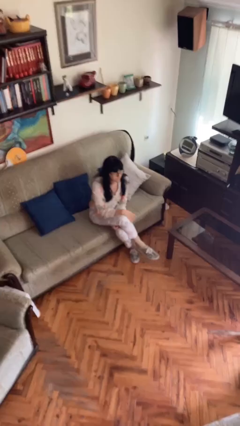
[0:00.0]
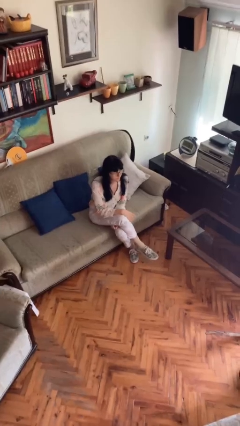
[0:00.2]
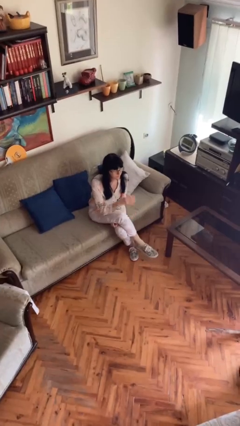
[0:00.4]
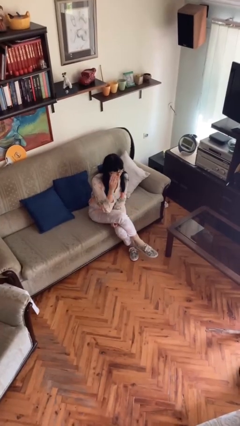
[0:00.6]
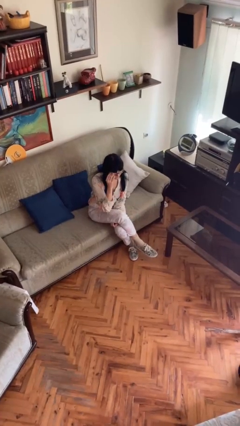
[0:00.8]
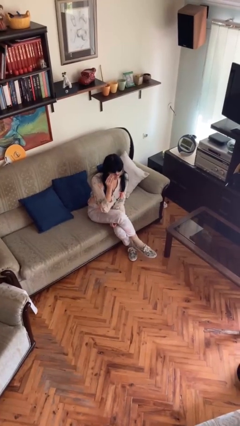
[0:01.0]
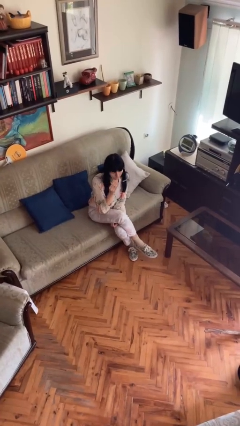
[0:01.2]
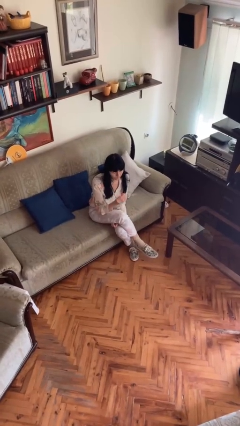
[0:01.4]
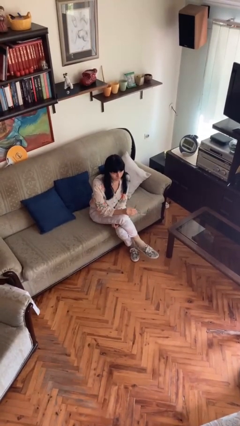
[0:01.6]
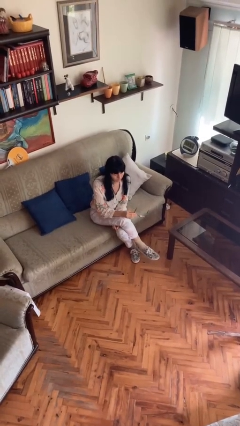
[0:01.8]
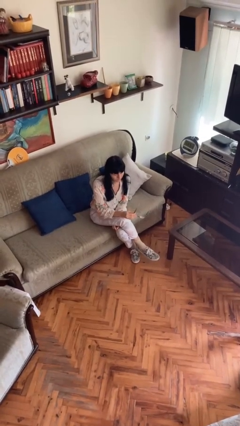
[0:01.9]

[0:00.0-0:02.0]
person takes off glasses

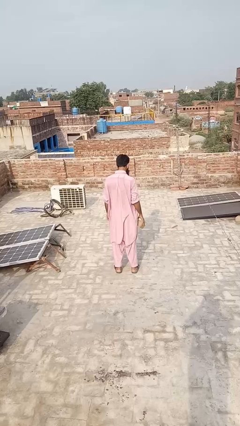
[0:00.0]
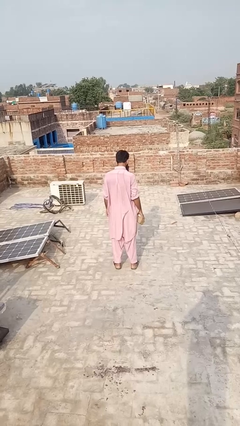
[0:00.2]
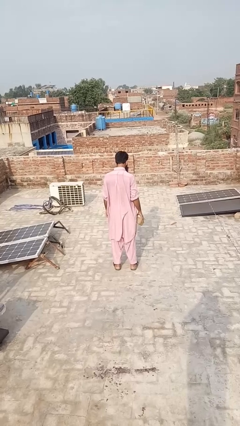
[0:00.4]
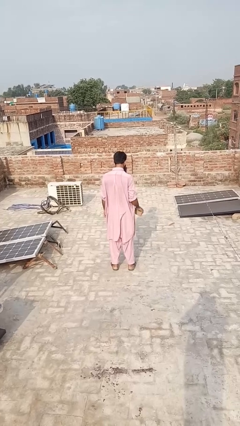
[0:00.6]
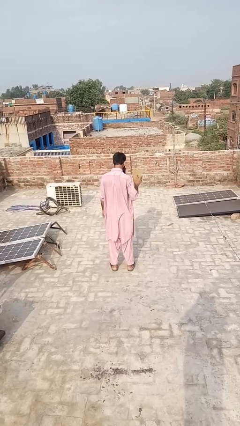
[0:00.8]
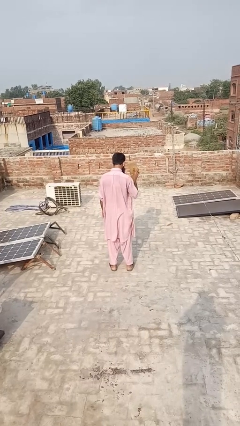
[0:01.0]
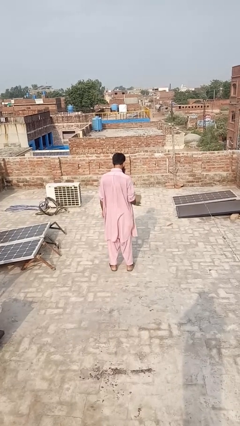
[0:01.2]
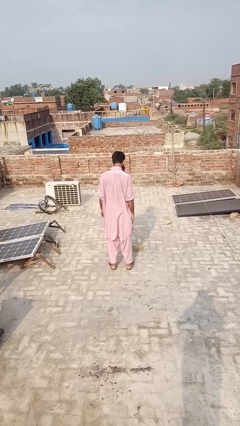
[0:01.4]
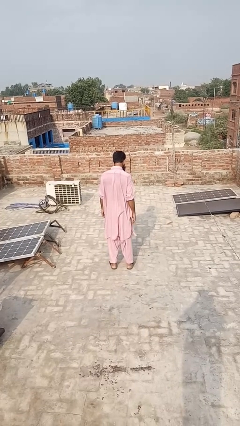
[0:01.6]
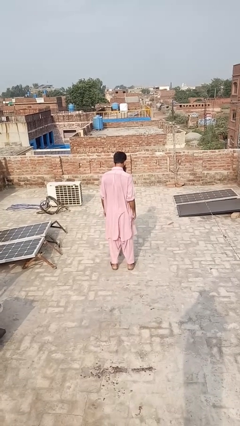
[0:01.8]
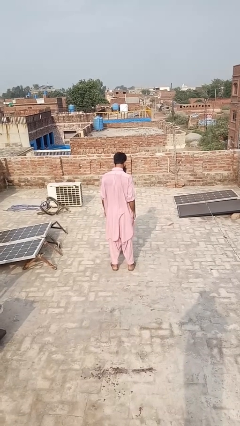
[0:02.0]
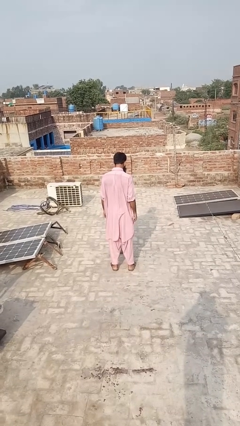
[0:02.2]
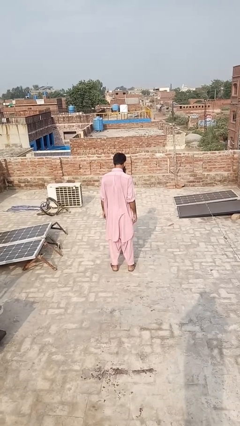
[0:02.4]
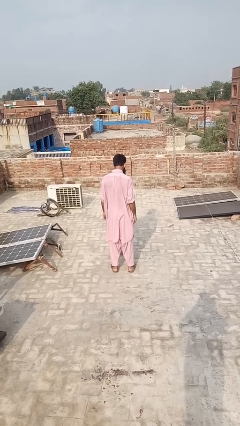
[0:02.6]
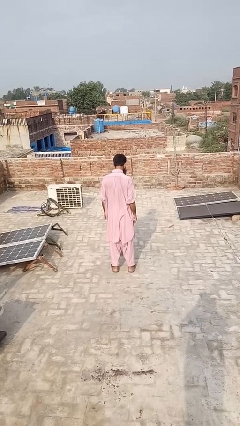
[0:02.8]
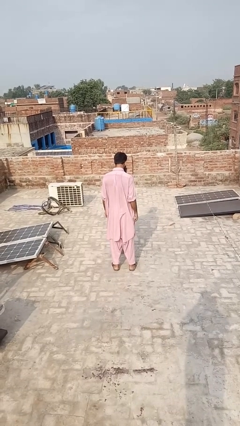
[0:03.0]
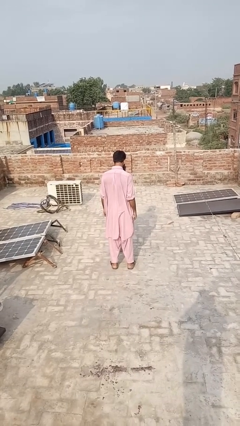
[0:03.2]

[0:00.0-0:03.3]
person throws object to ground

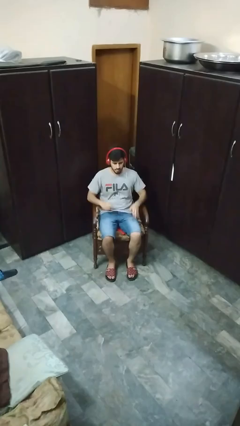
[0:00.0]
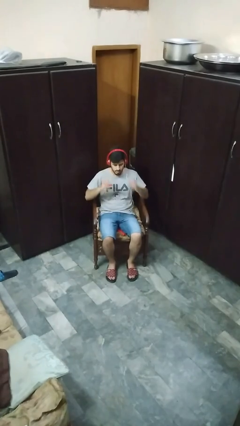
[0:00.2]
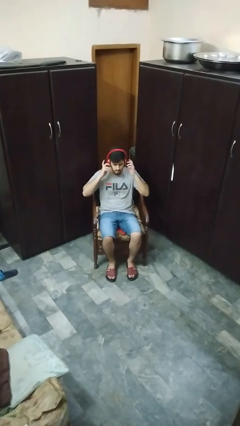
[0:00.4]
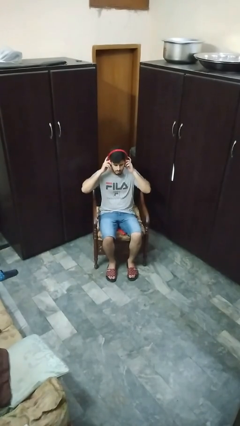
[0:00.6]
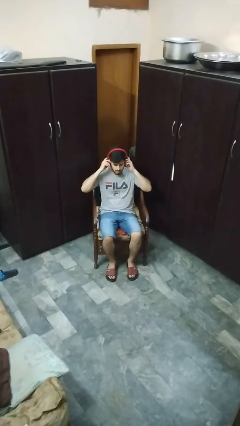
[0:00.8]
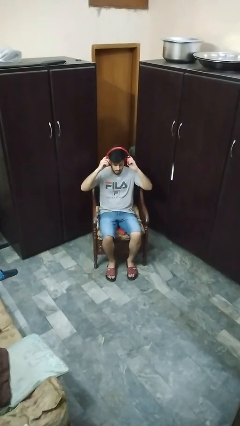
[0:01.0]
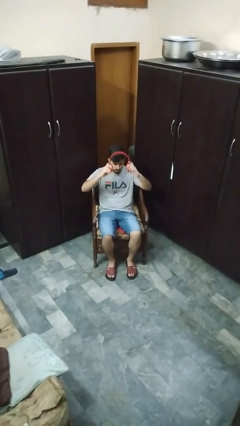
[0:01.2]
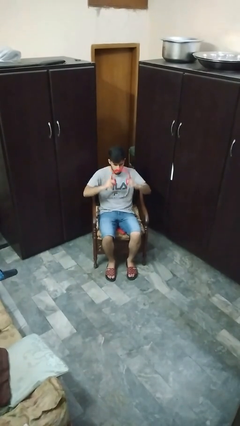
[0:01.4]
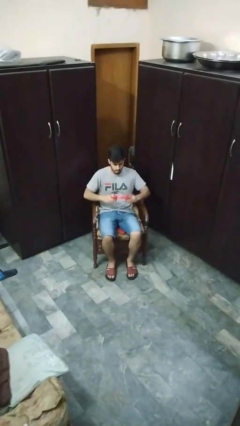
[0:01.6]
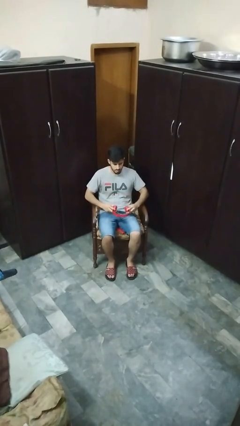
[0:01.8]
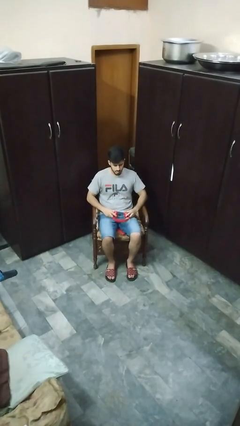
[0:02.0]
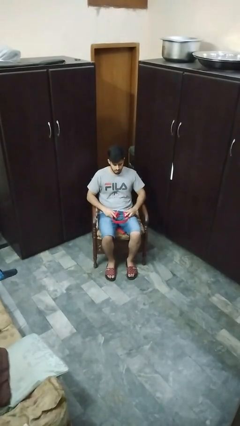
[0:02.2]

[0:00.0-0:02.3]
person takes off headphones

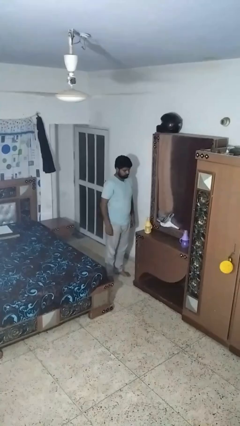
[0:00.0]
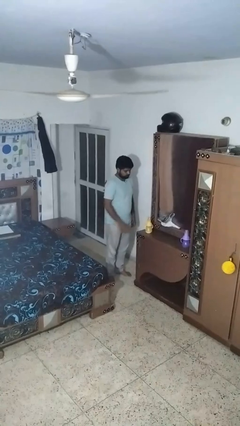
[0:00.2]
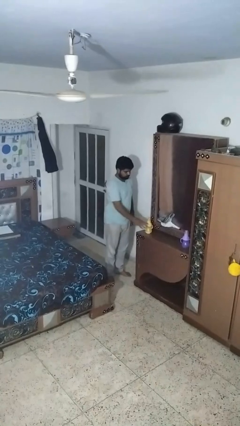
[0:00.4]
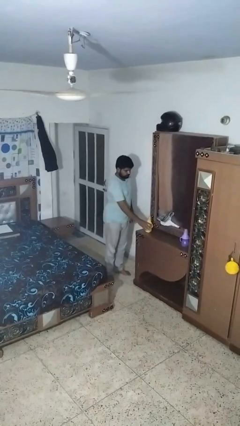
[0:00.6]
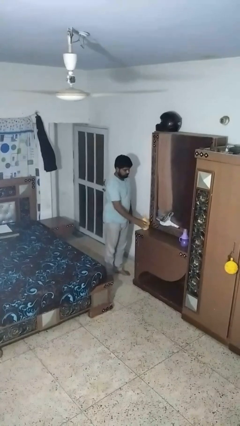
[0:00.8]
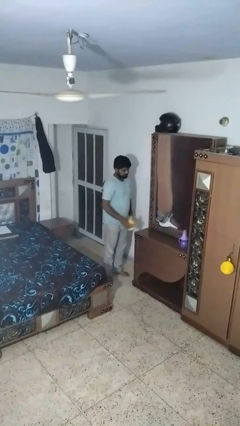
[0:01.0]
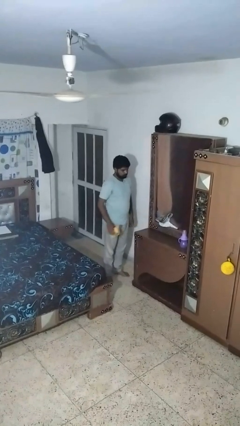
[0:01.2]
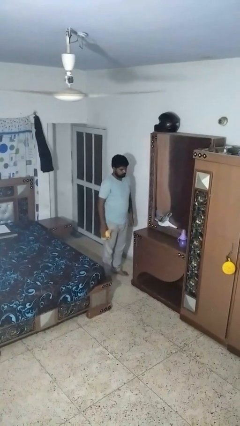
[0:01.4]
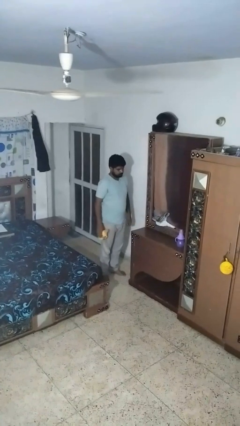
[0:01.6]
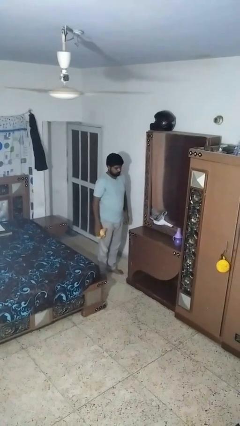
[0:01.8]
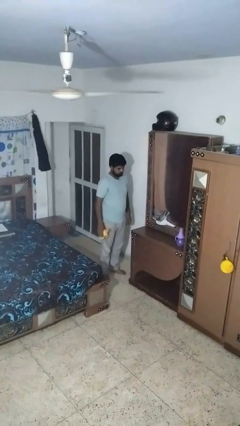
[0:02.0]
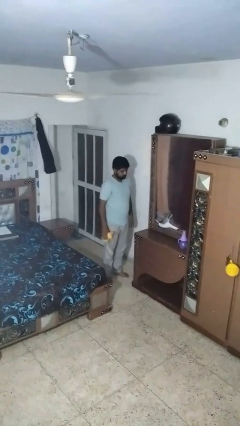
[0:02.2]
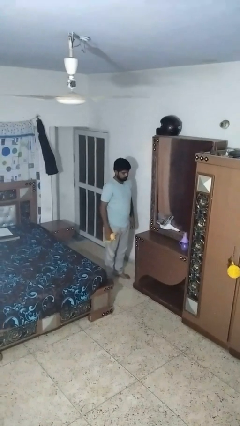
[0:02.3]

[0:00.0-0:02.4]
person picks up object from countertop

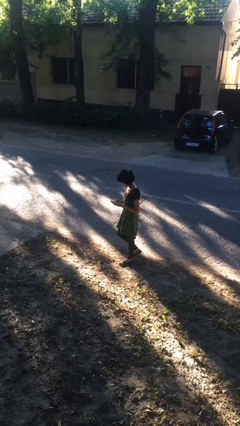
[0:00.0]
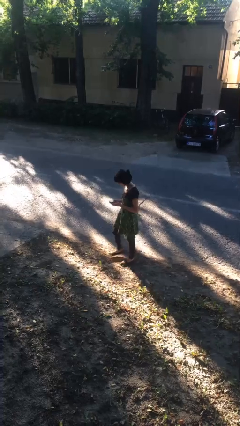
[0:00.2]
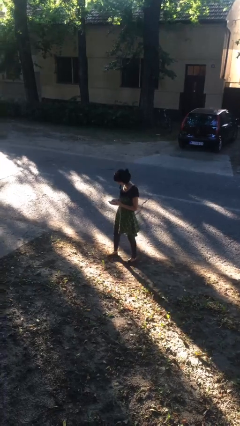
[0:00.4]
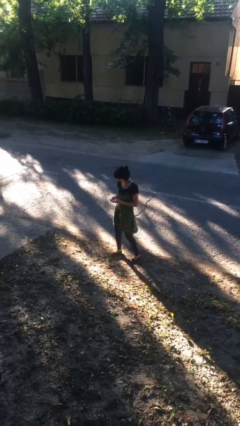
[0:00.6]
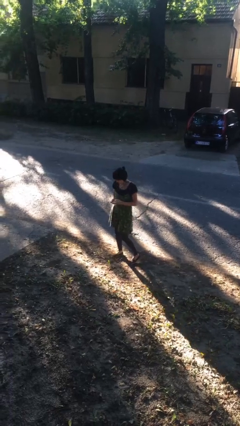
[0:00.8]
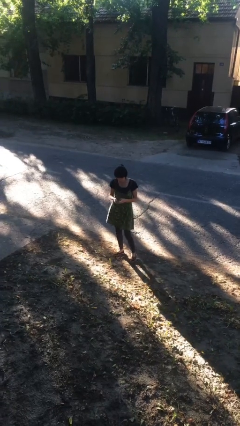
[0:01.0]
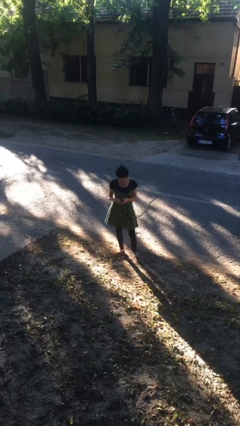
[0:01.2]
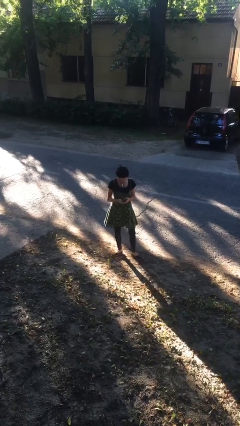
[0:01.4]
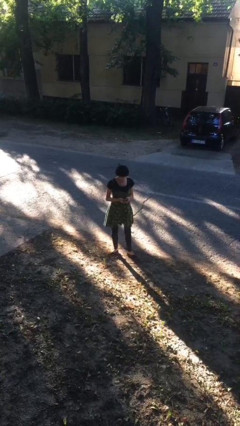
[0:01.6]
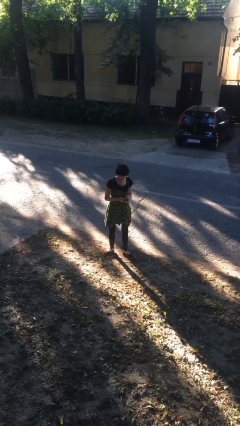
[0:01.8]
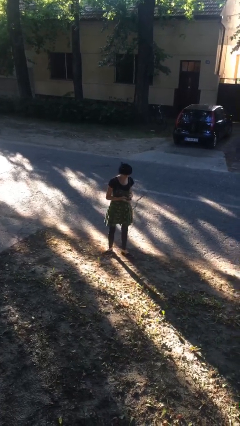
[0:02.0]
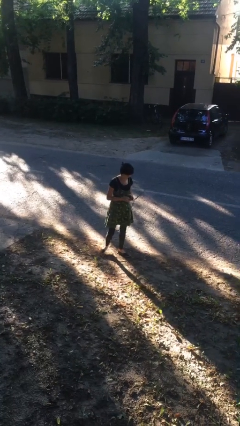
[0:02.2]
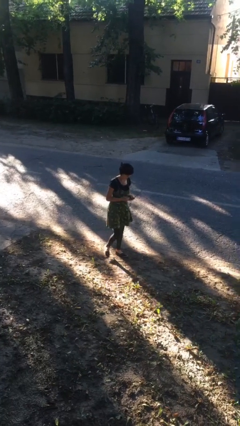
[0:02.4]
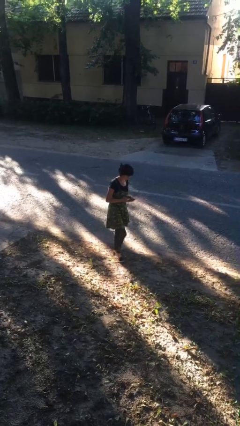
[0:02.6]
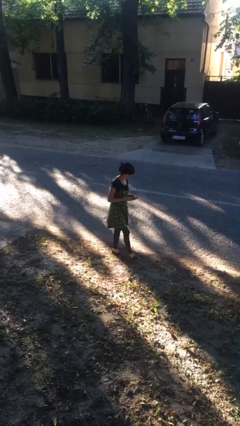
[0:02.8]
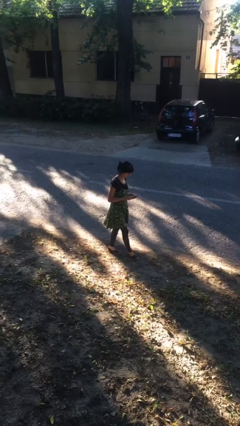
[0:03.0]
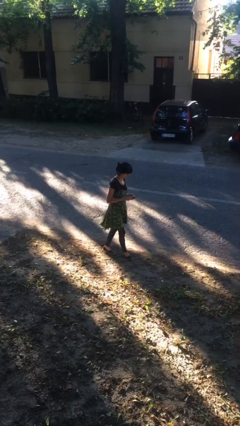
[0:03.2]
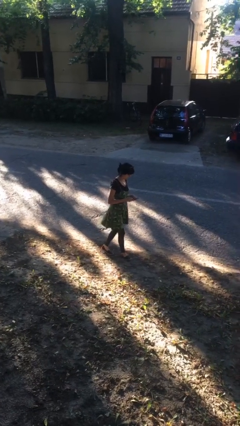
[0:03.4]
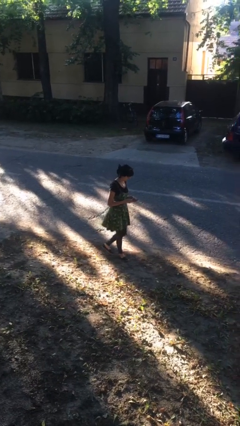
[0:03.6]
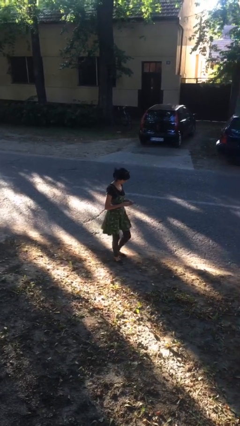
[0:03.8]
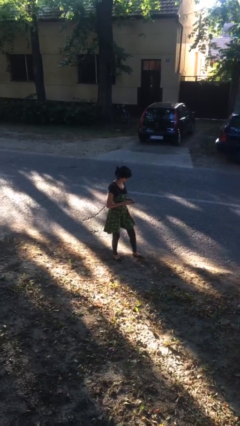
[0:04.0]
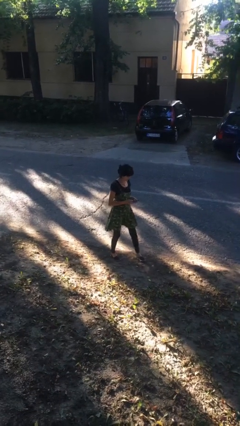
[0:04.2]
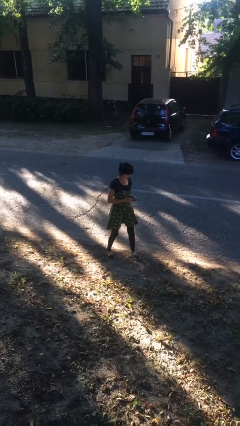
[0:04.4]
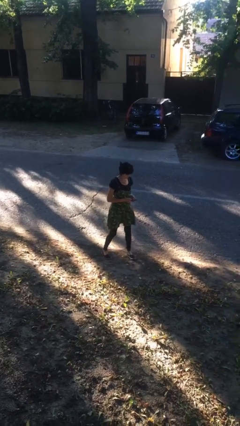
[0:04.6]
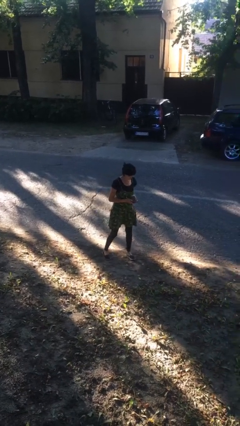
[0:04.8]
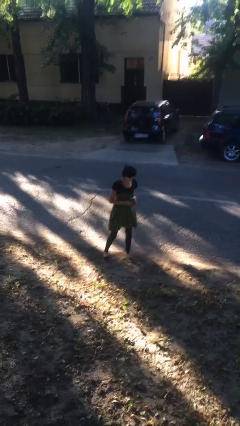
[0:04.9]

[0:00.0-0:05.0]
person texts on phone

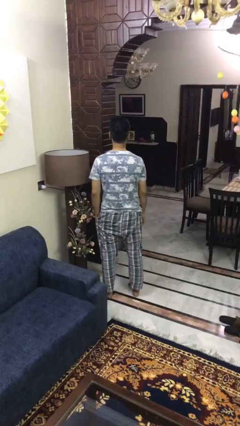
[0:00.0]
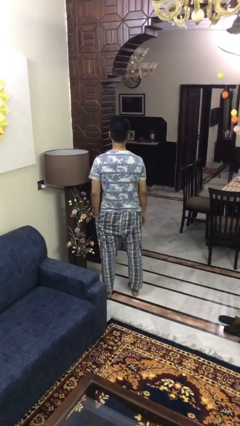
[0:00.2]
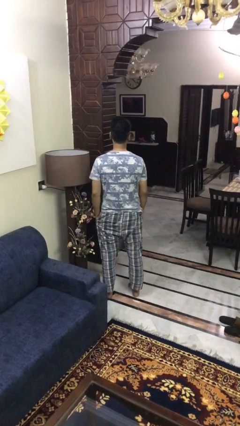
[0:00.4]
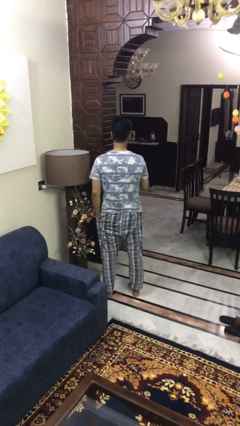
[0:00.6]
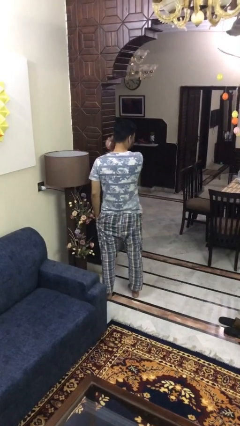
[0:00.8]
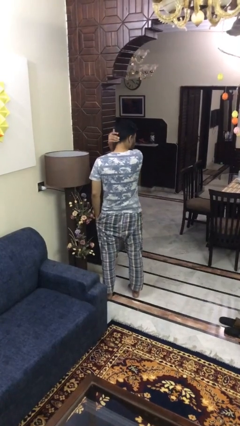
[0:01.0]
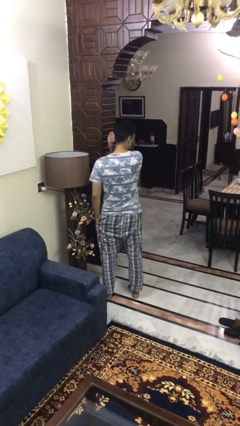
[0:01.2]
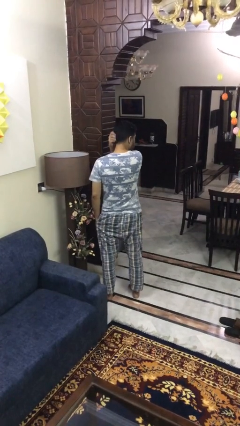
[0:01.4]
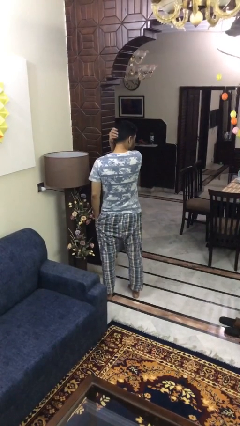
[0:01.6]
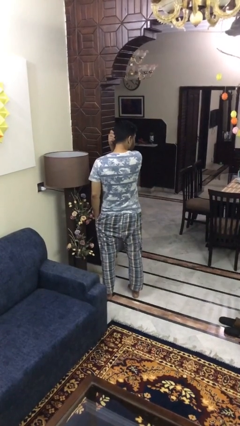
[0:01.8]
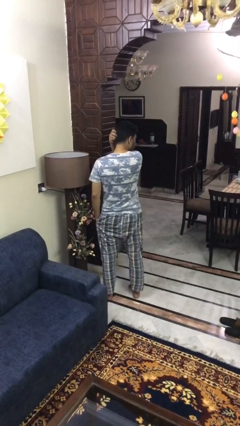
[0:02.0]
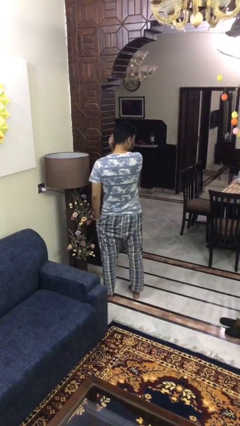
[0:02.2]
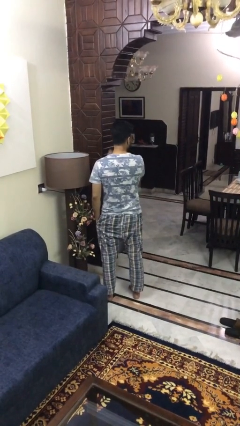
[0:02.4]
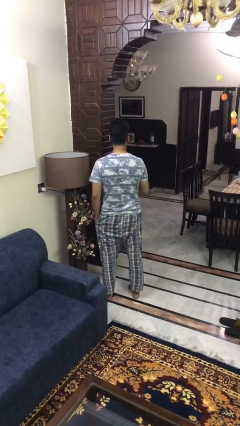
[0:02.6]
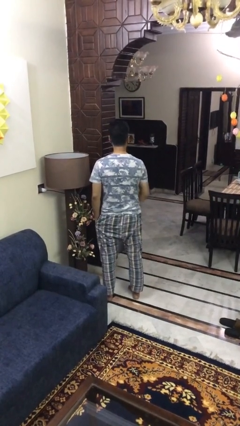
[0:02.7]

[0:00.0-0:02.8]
person scratches face
